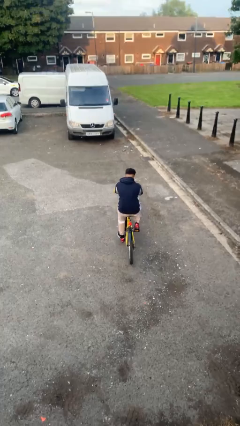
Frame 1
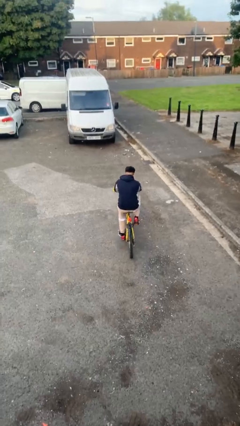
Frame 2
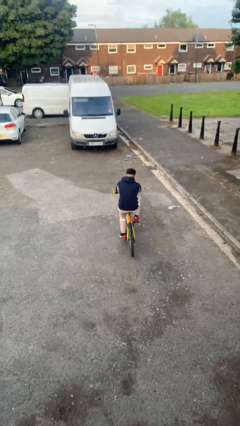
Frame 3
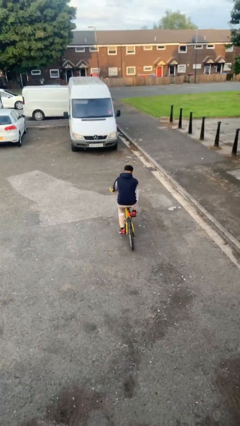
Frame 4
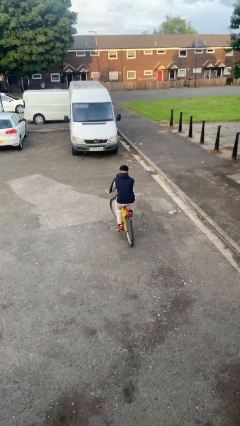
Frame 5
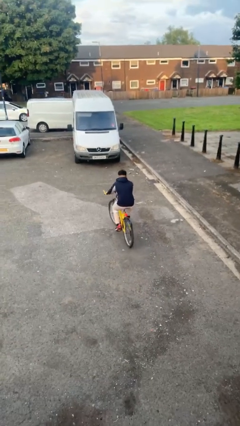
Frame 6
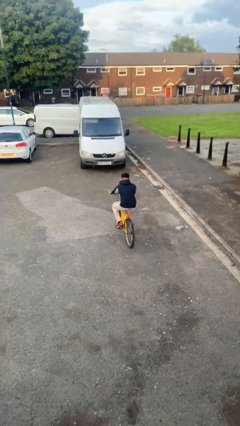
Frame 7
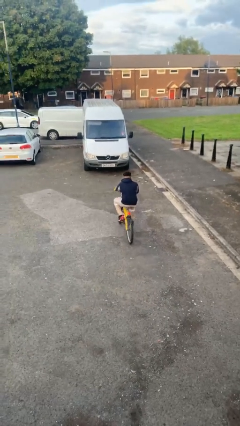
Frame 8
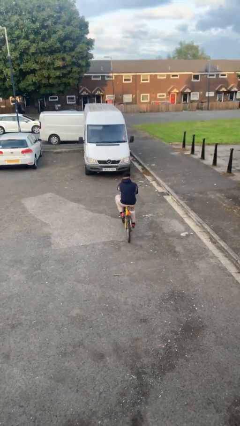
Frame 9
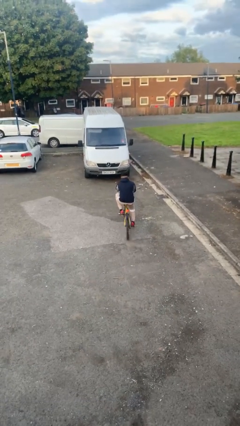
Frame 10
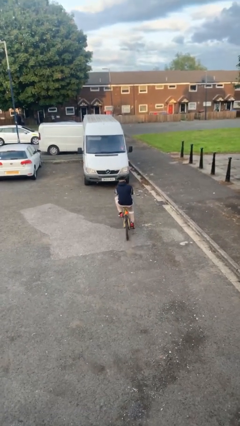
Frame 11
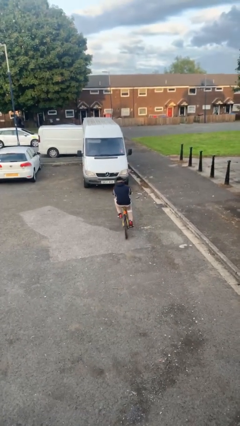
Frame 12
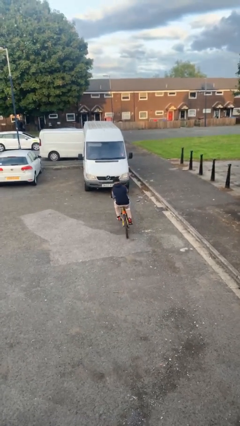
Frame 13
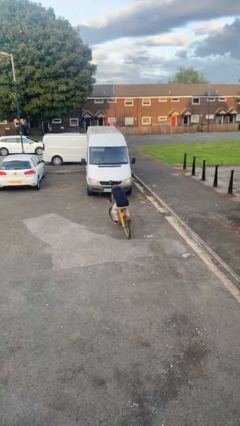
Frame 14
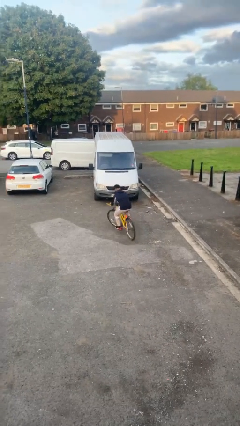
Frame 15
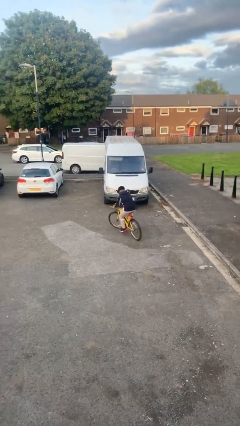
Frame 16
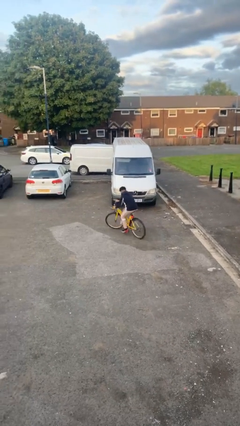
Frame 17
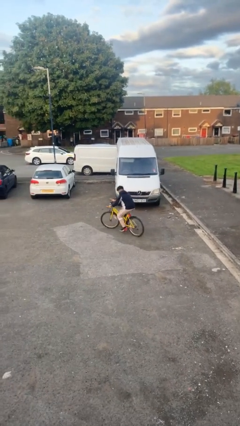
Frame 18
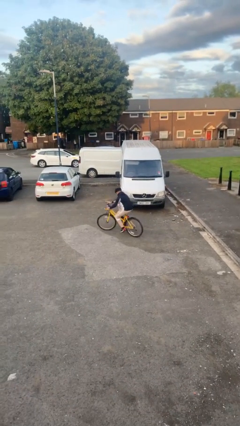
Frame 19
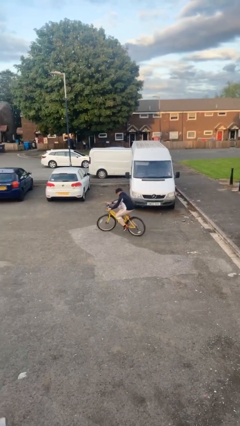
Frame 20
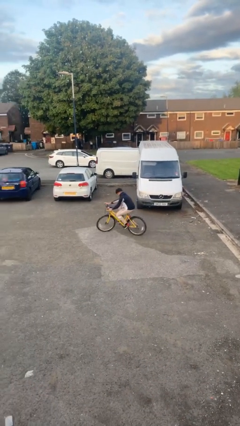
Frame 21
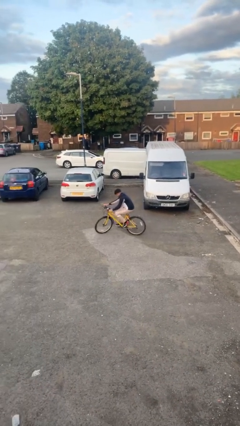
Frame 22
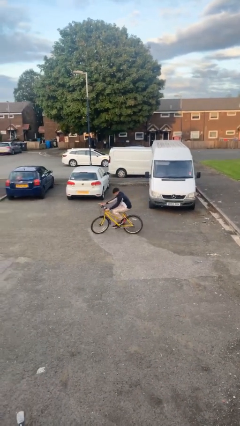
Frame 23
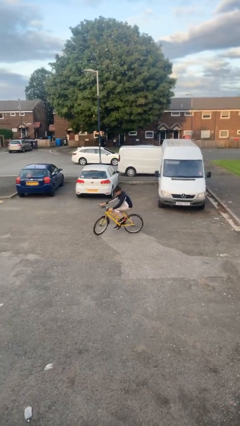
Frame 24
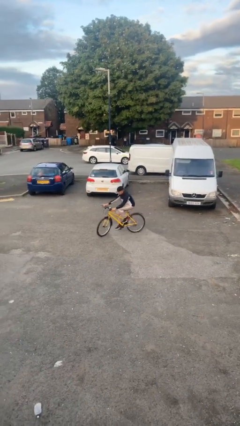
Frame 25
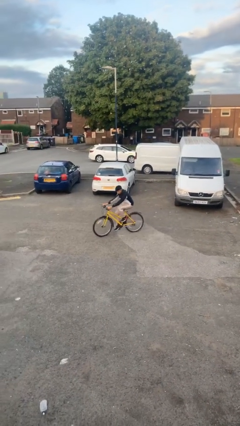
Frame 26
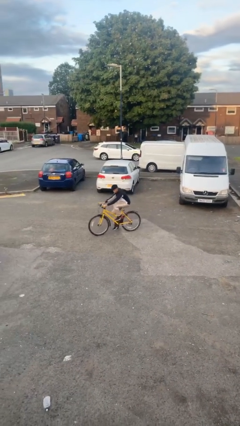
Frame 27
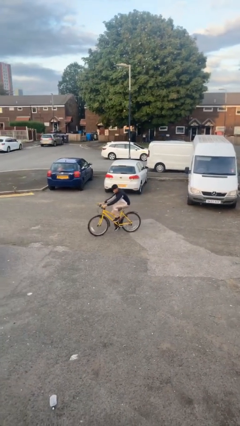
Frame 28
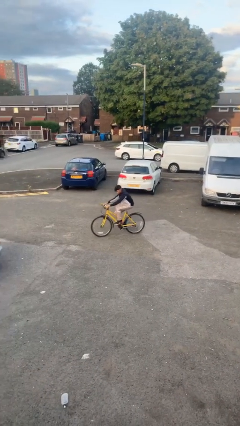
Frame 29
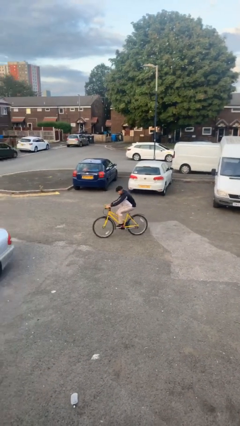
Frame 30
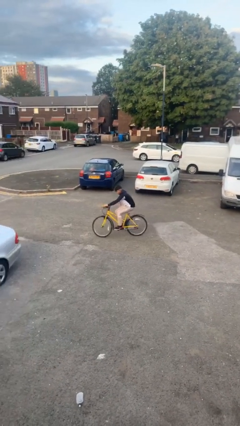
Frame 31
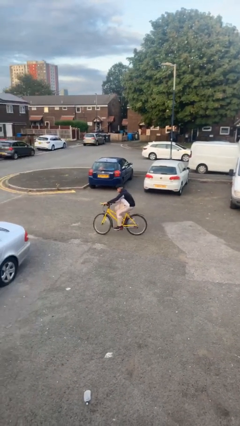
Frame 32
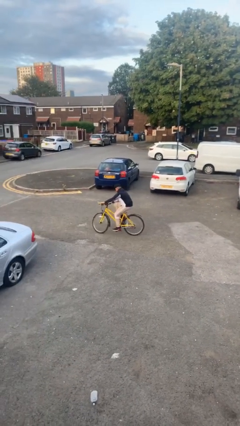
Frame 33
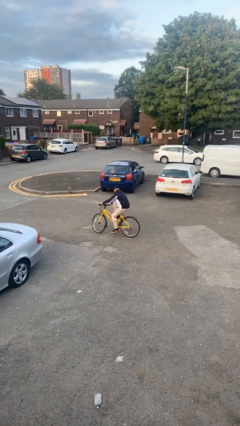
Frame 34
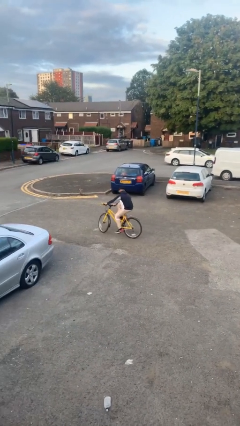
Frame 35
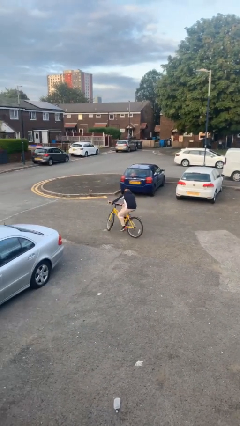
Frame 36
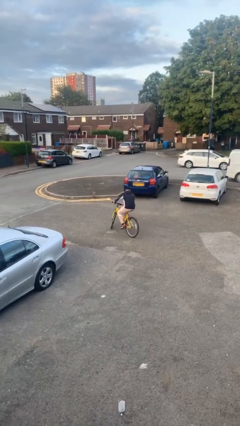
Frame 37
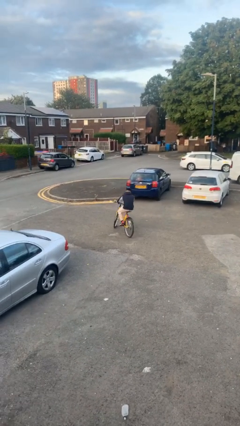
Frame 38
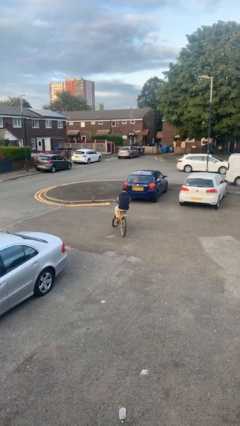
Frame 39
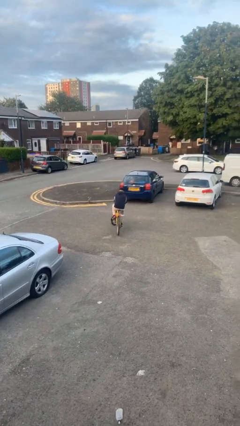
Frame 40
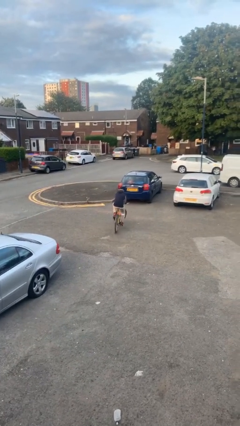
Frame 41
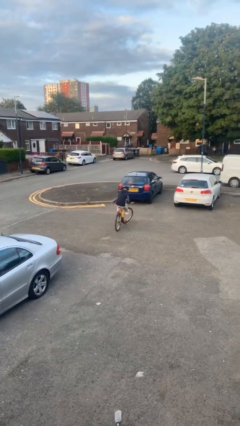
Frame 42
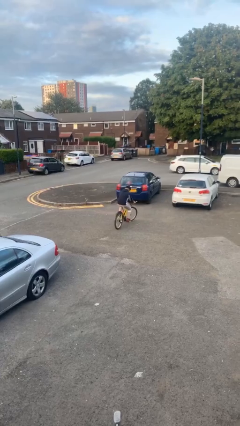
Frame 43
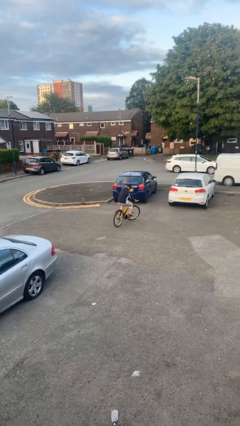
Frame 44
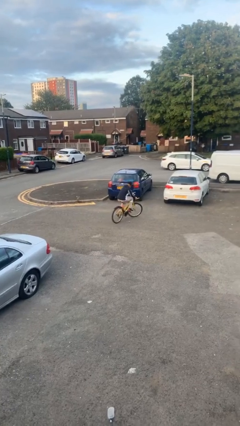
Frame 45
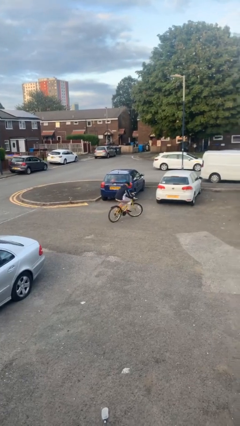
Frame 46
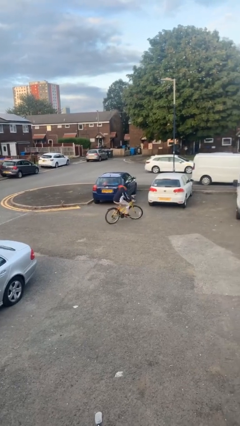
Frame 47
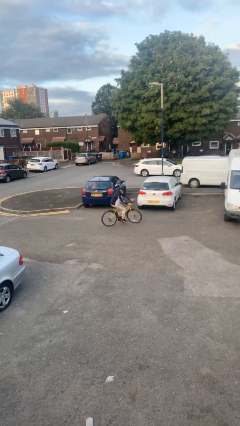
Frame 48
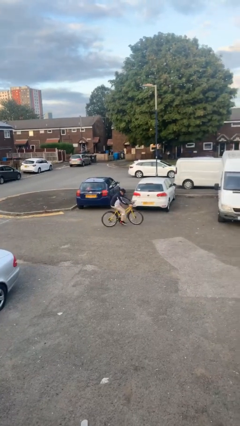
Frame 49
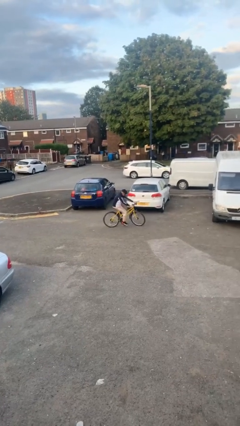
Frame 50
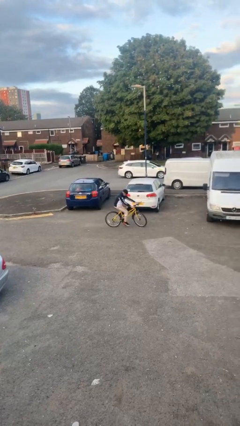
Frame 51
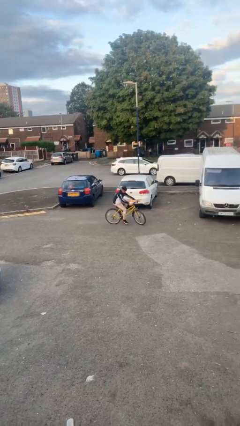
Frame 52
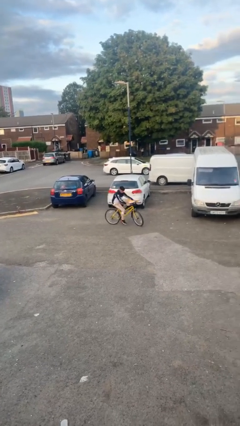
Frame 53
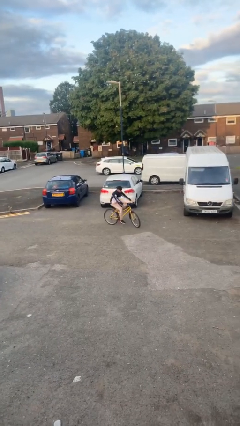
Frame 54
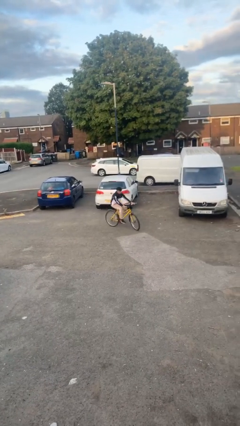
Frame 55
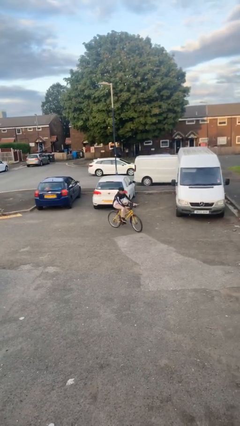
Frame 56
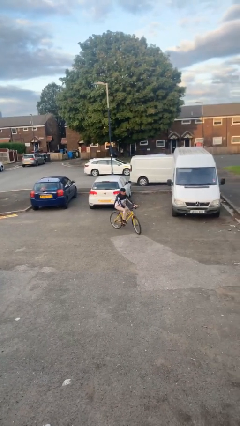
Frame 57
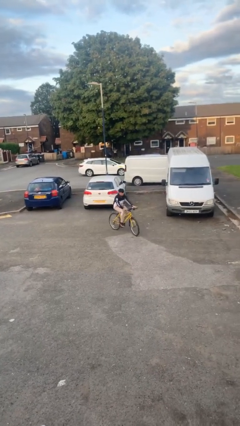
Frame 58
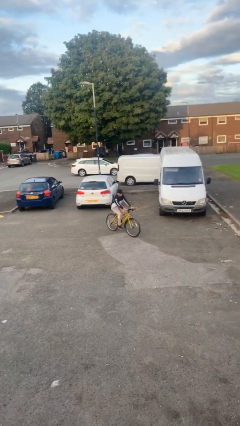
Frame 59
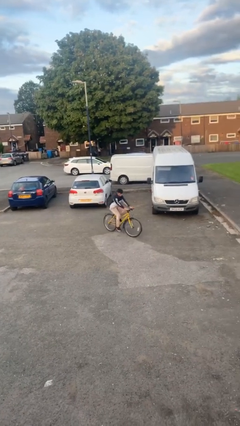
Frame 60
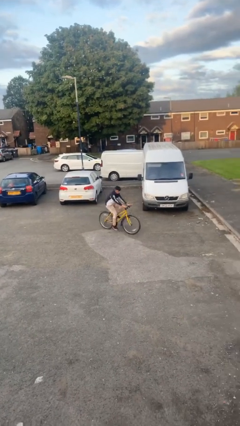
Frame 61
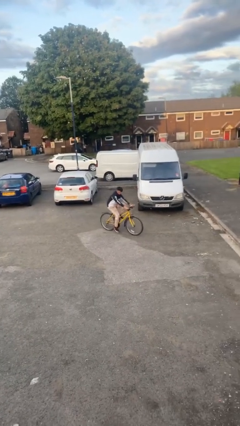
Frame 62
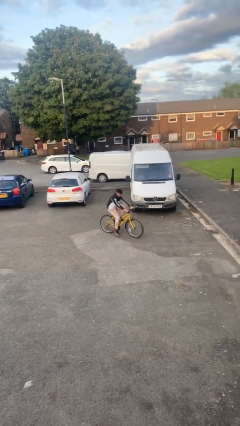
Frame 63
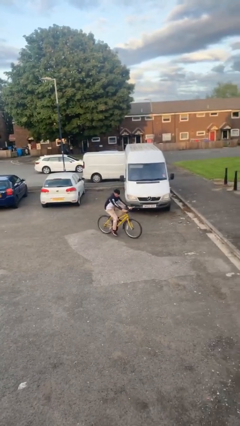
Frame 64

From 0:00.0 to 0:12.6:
person rides bicycle

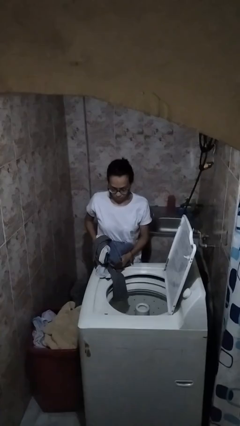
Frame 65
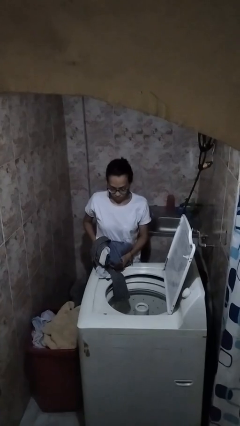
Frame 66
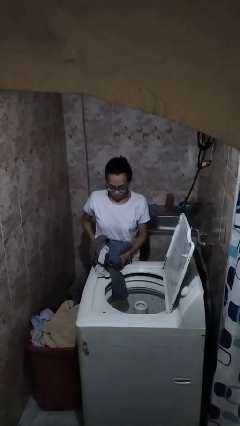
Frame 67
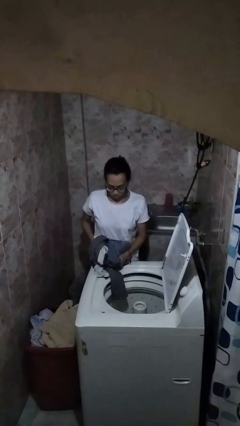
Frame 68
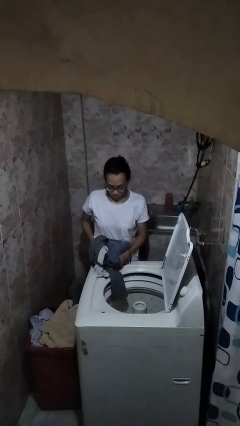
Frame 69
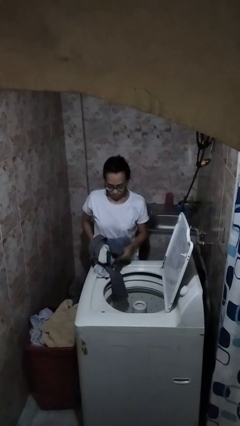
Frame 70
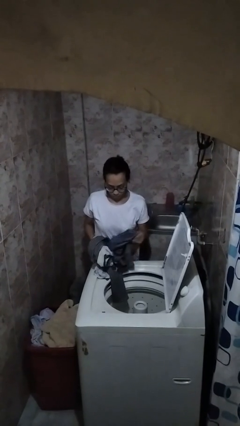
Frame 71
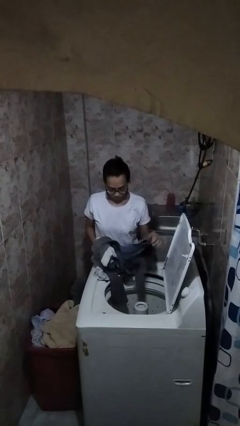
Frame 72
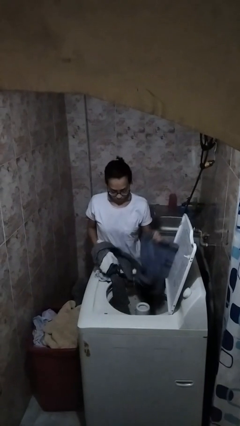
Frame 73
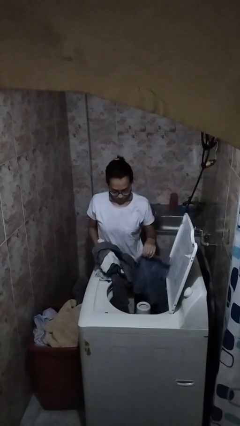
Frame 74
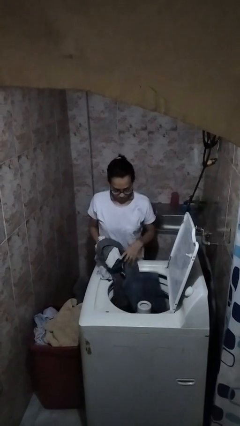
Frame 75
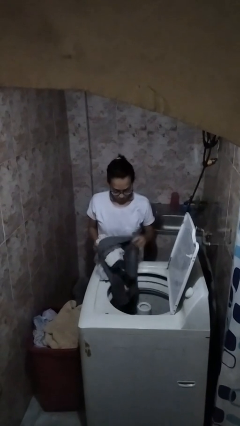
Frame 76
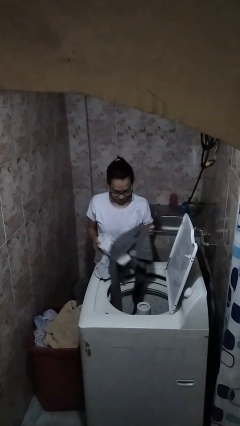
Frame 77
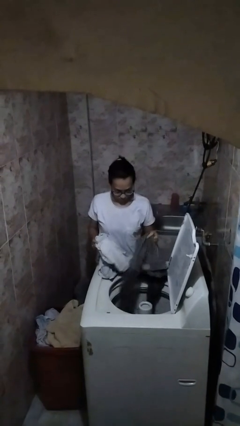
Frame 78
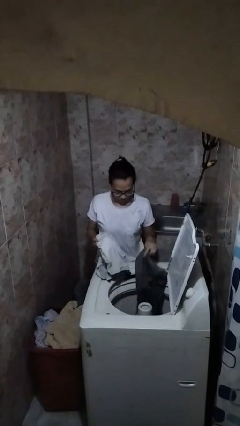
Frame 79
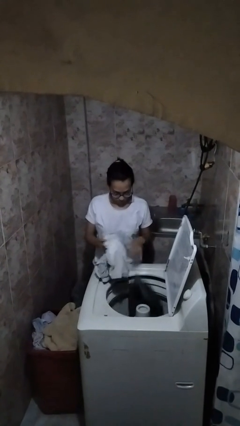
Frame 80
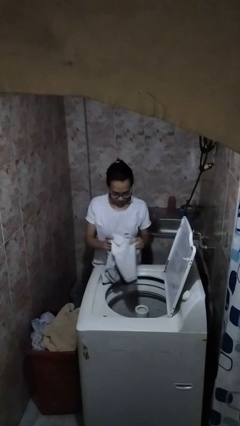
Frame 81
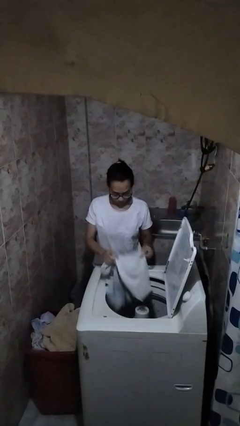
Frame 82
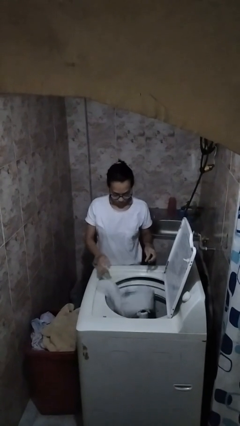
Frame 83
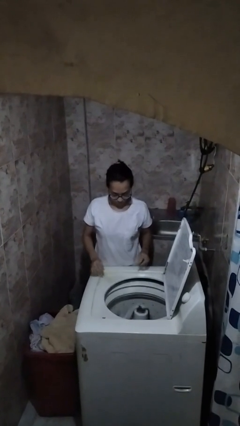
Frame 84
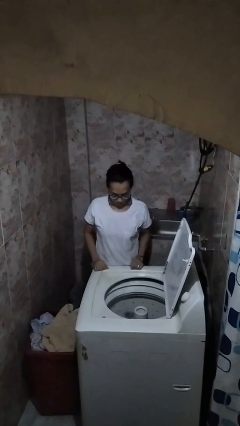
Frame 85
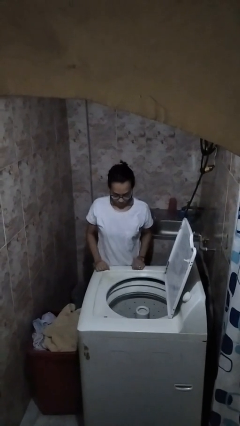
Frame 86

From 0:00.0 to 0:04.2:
person unloads clotheswasher

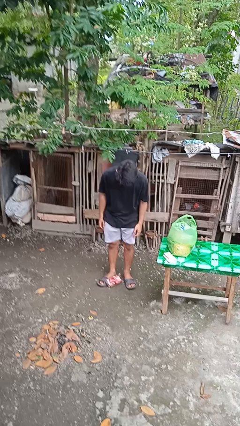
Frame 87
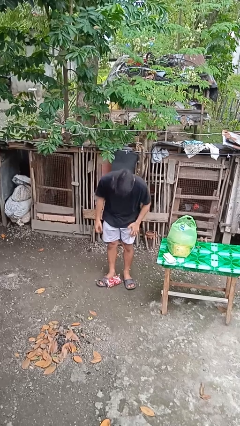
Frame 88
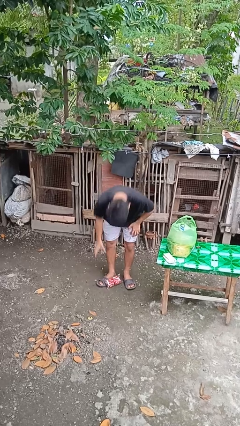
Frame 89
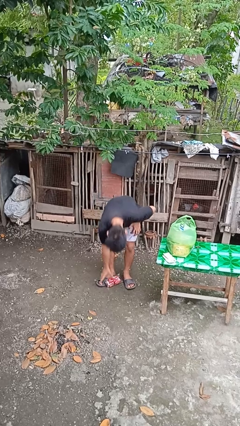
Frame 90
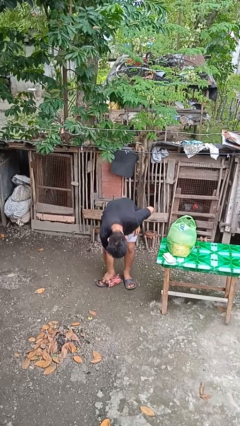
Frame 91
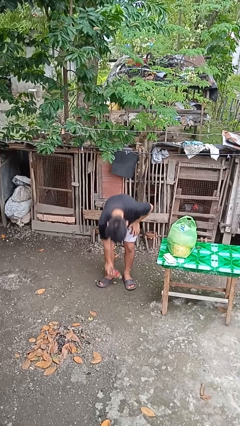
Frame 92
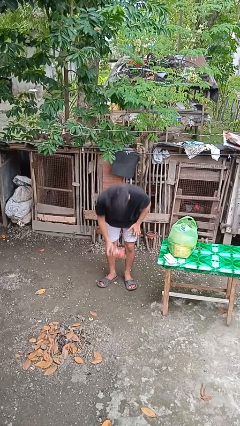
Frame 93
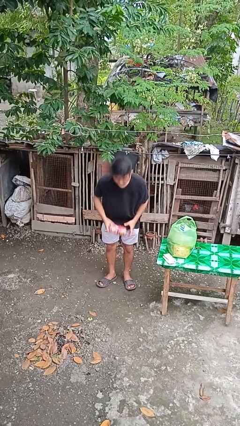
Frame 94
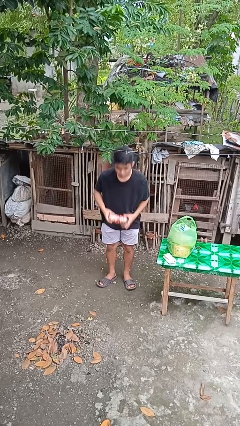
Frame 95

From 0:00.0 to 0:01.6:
person picks up object from floor
